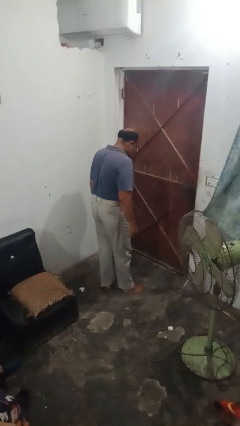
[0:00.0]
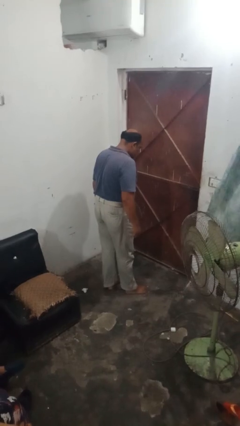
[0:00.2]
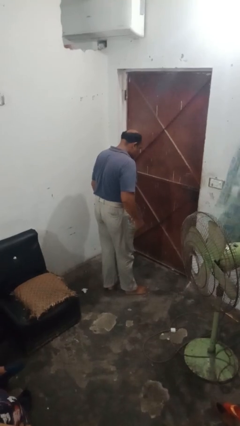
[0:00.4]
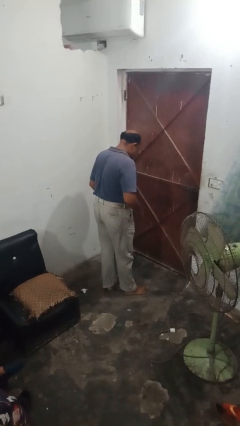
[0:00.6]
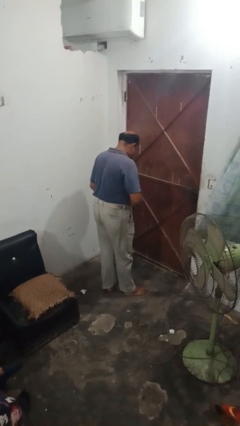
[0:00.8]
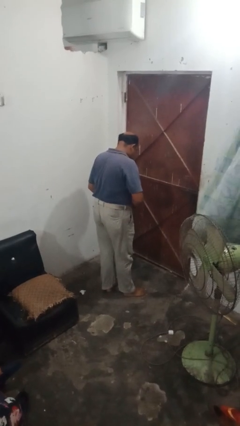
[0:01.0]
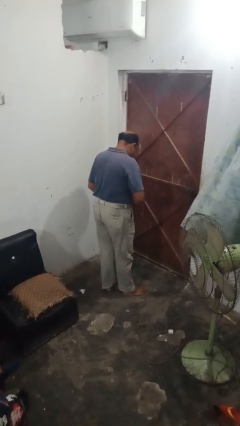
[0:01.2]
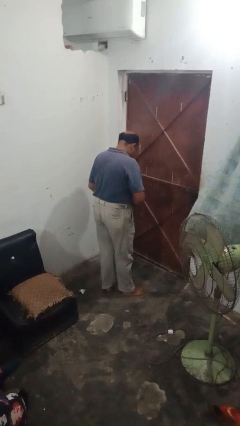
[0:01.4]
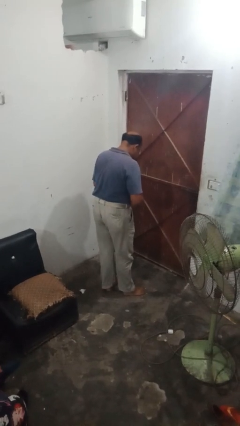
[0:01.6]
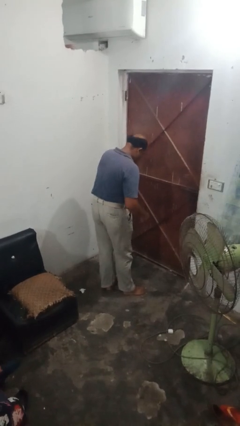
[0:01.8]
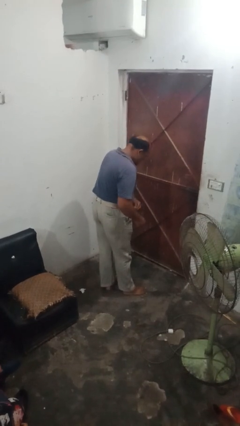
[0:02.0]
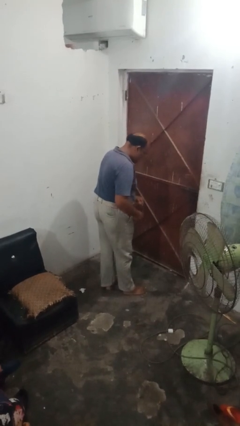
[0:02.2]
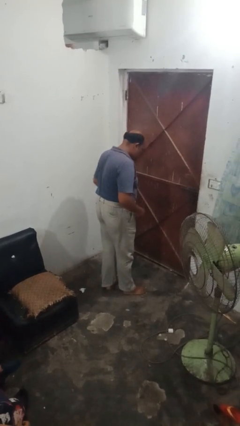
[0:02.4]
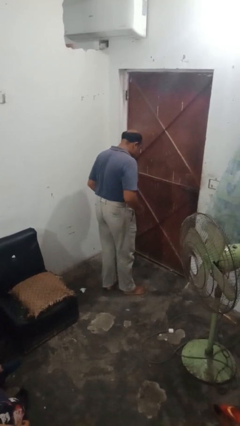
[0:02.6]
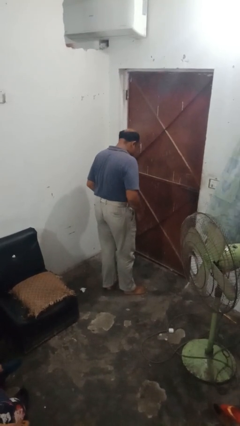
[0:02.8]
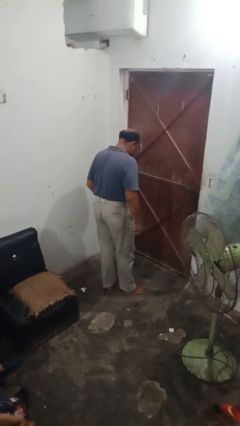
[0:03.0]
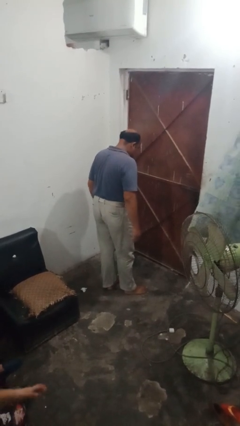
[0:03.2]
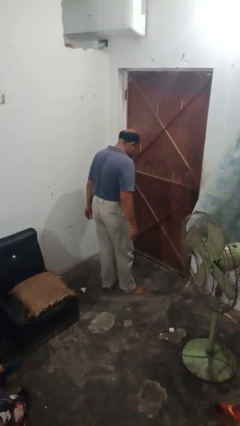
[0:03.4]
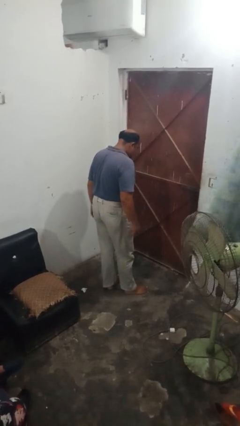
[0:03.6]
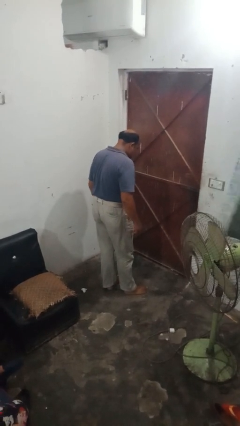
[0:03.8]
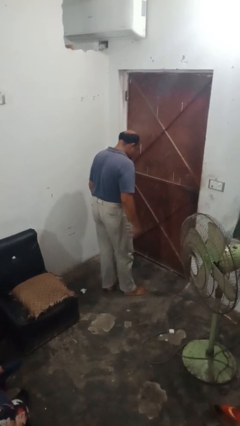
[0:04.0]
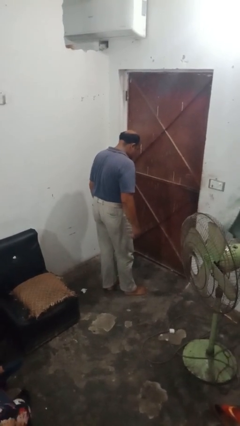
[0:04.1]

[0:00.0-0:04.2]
person puts on belt

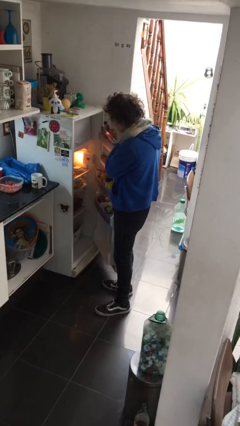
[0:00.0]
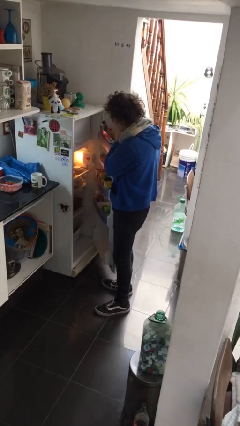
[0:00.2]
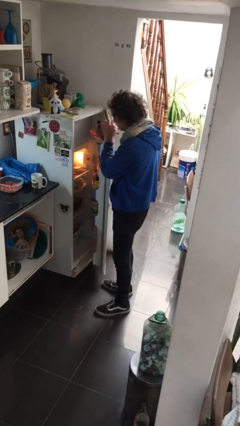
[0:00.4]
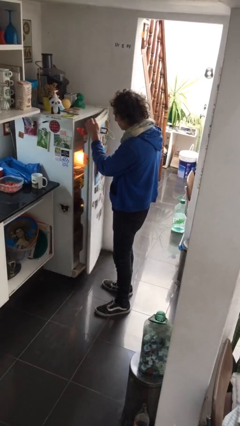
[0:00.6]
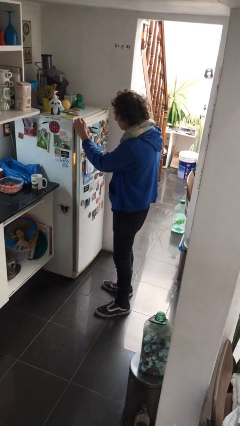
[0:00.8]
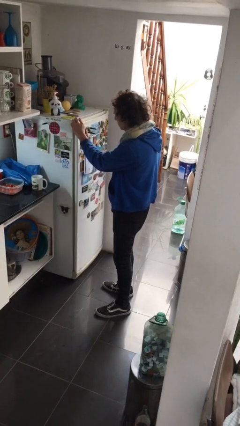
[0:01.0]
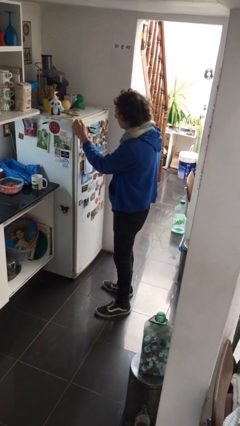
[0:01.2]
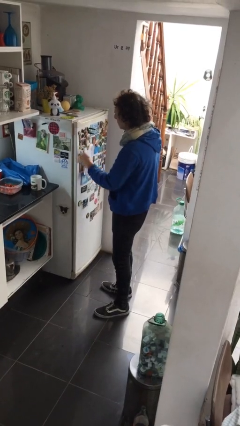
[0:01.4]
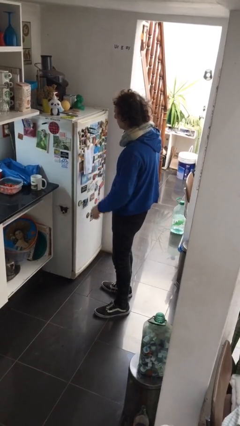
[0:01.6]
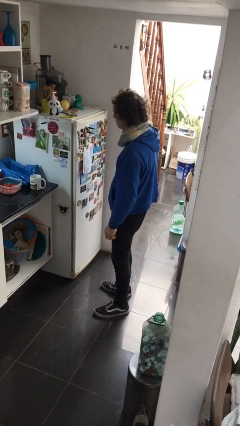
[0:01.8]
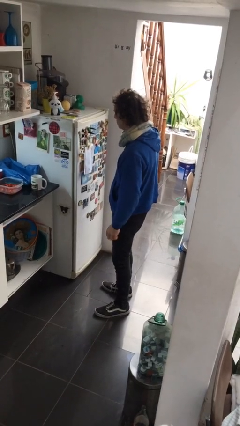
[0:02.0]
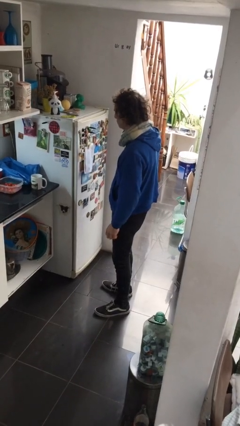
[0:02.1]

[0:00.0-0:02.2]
person closes refrigerator

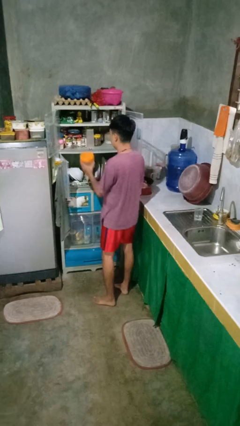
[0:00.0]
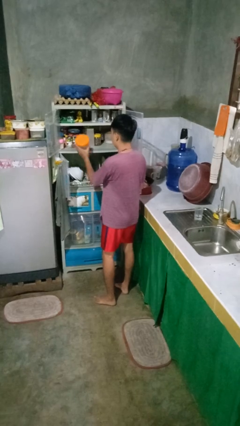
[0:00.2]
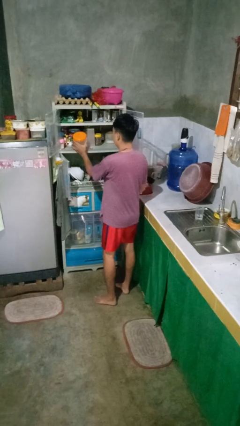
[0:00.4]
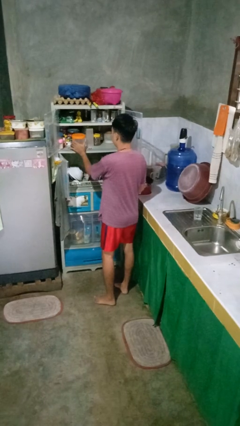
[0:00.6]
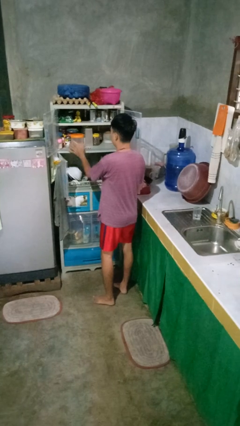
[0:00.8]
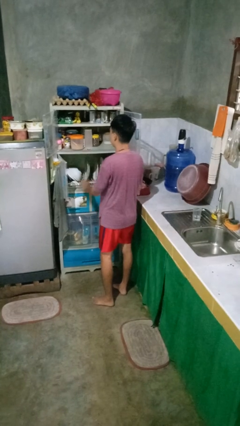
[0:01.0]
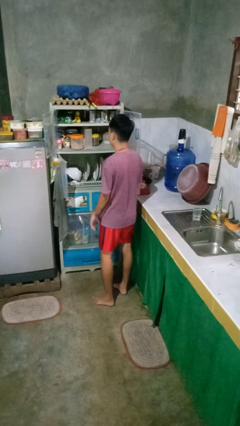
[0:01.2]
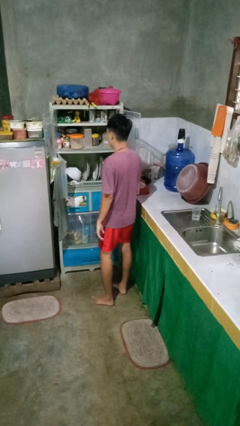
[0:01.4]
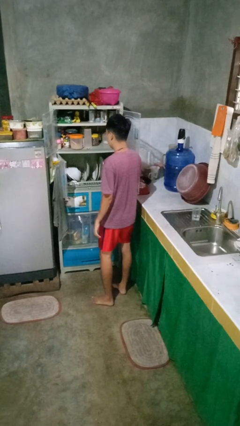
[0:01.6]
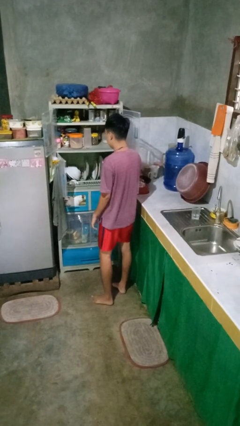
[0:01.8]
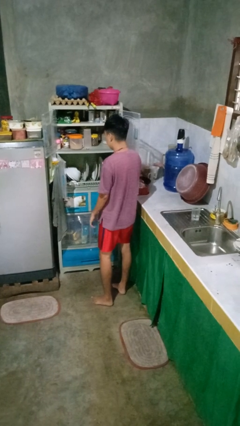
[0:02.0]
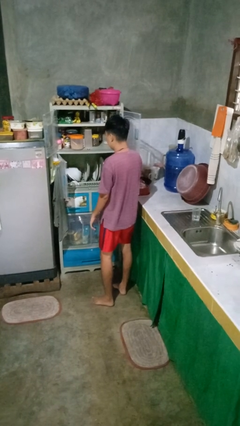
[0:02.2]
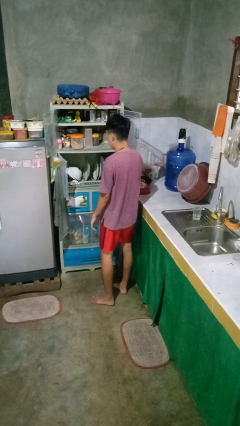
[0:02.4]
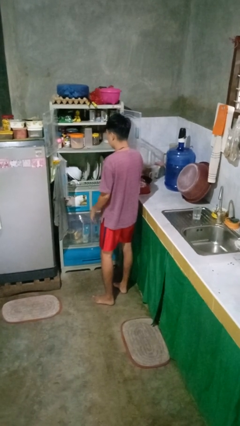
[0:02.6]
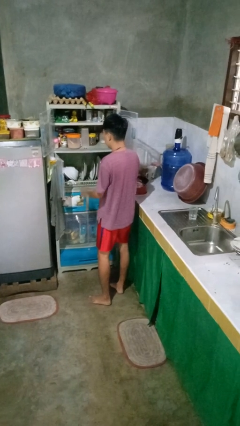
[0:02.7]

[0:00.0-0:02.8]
person puts object in cabinet

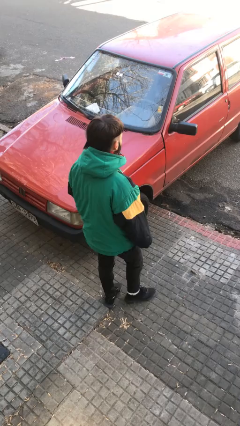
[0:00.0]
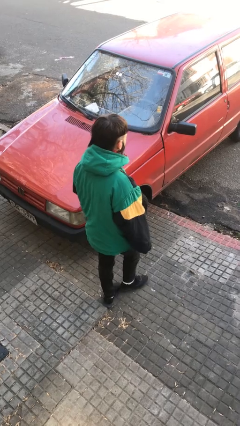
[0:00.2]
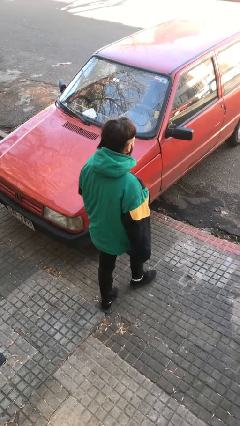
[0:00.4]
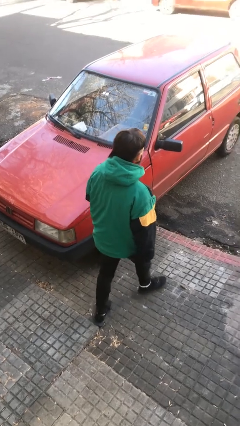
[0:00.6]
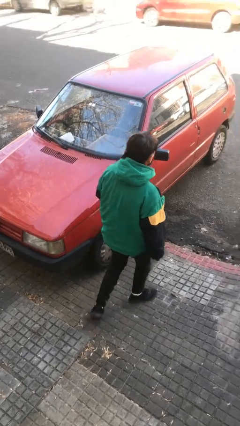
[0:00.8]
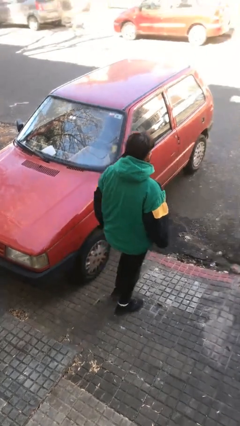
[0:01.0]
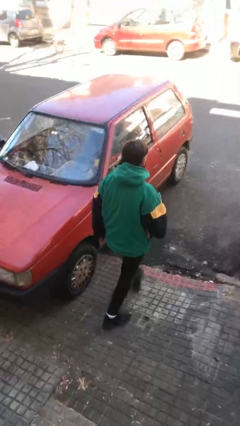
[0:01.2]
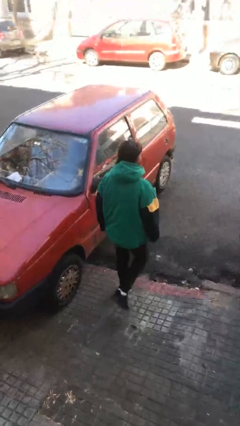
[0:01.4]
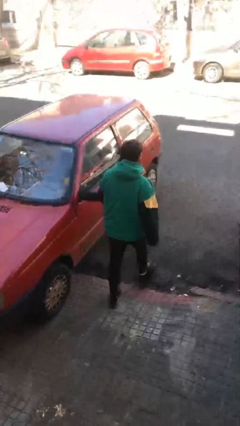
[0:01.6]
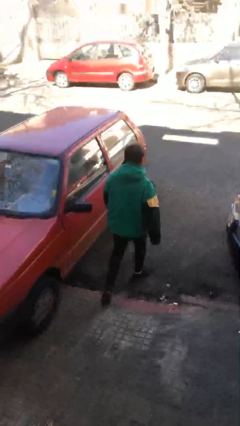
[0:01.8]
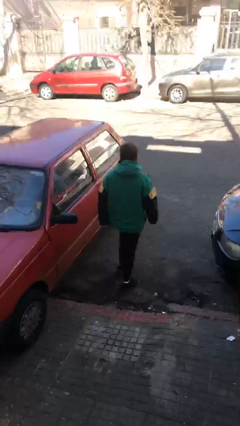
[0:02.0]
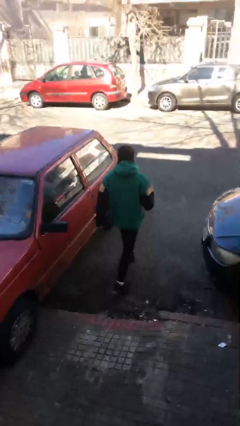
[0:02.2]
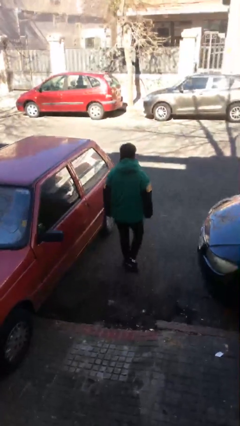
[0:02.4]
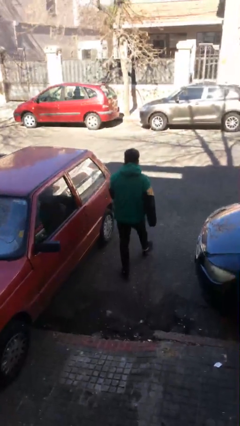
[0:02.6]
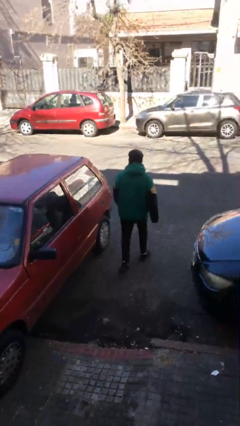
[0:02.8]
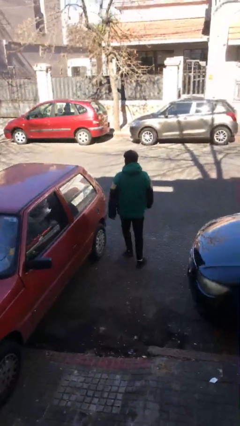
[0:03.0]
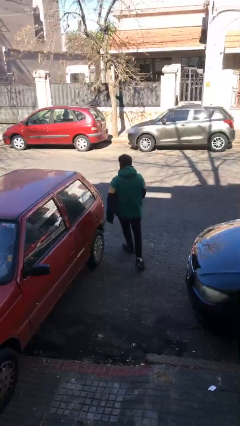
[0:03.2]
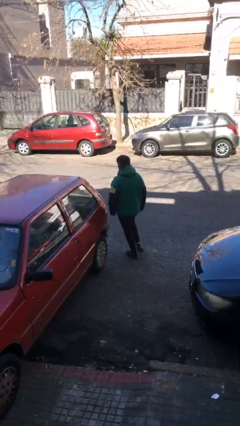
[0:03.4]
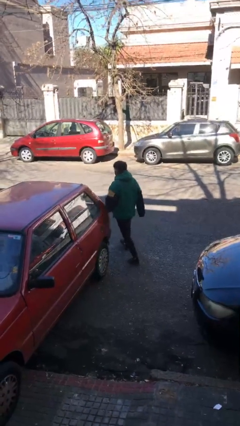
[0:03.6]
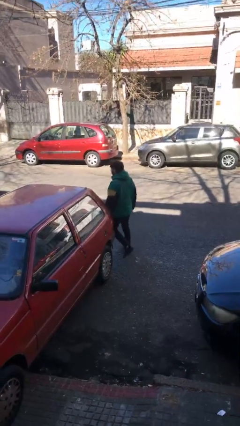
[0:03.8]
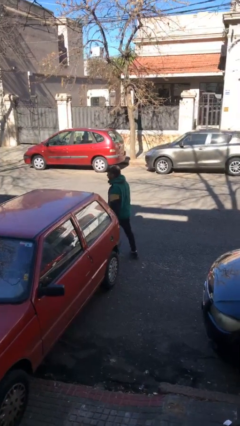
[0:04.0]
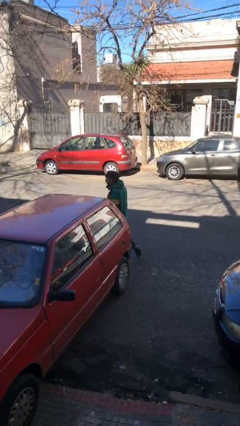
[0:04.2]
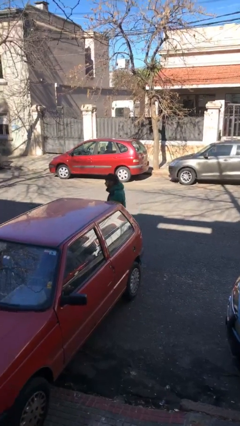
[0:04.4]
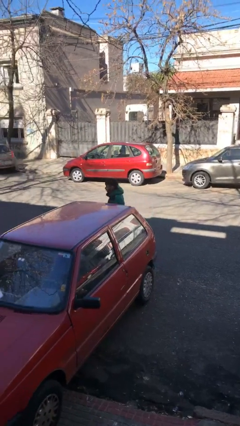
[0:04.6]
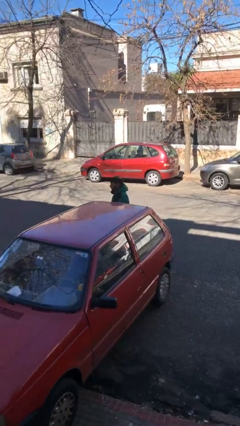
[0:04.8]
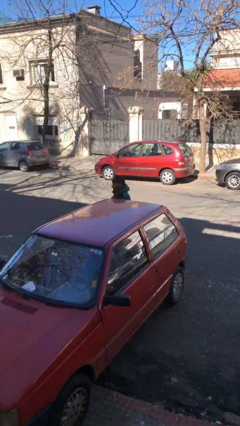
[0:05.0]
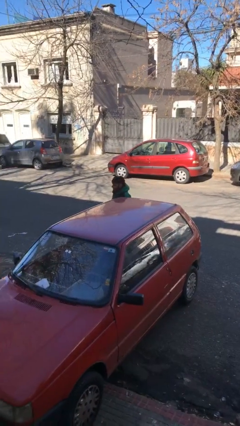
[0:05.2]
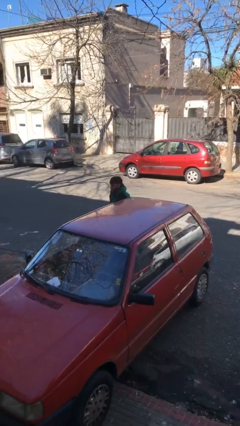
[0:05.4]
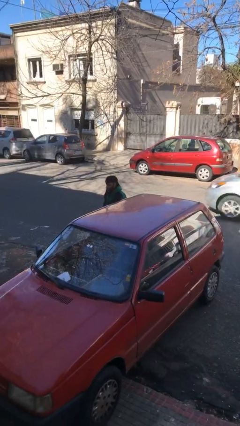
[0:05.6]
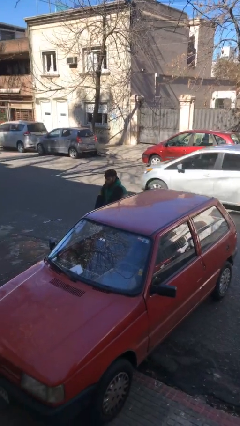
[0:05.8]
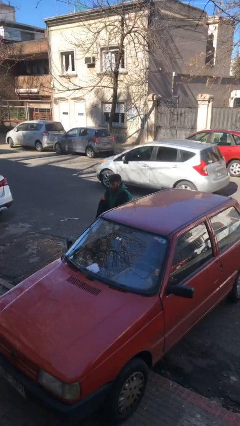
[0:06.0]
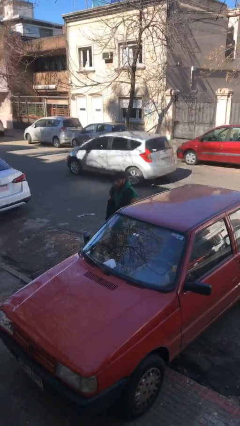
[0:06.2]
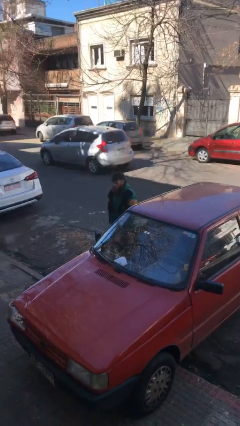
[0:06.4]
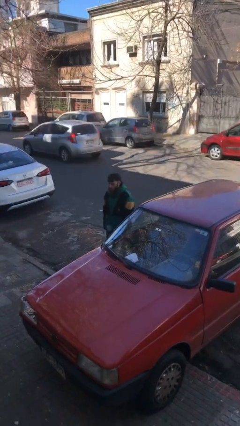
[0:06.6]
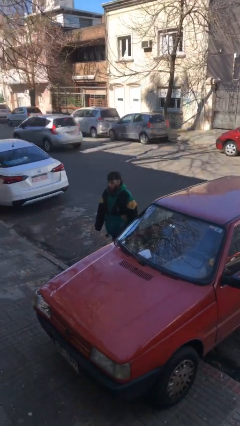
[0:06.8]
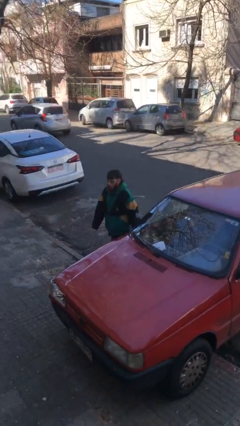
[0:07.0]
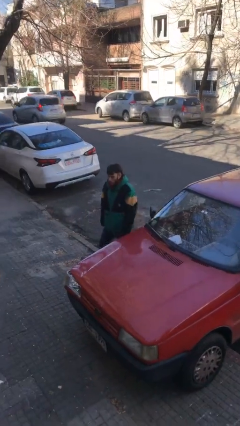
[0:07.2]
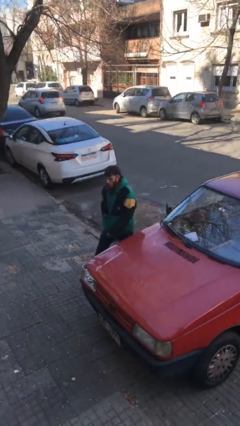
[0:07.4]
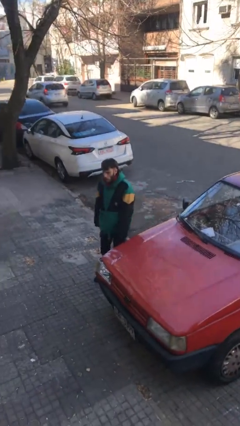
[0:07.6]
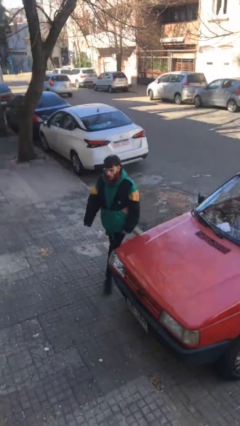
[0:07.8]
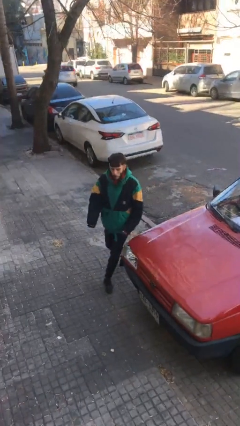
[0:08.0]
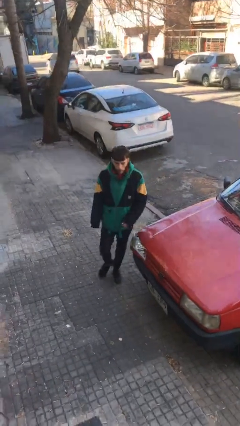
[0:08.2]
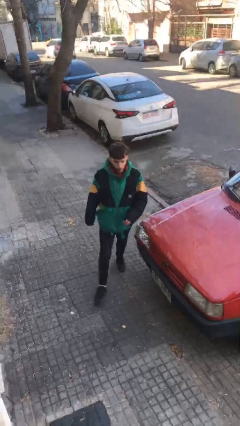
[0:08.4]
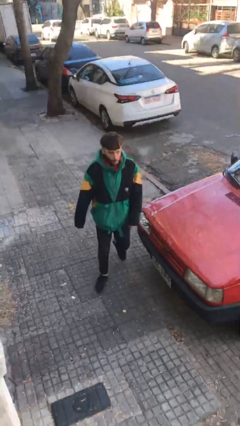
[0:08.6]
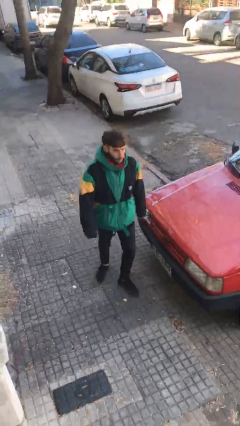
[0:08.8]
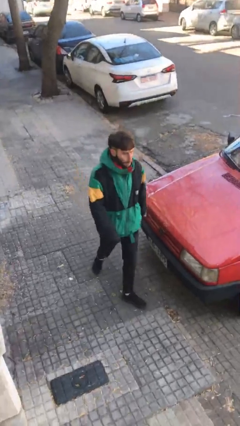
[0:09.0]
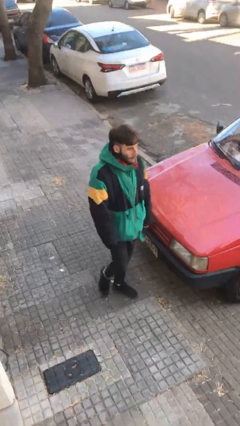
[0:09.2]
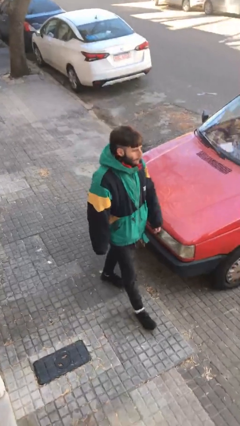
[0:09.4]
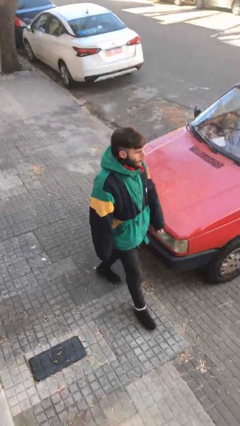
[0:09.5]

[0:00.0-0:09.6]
person walks around car
